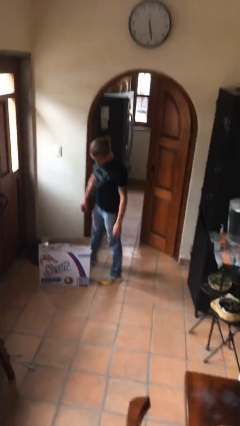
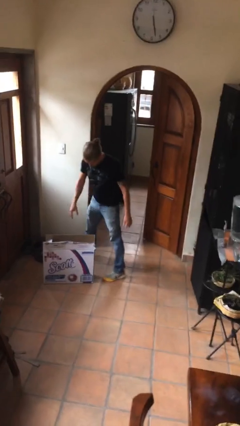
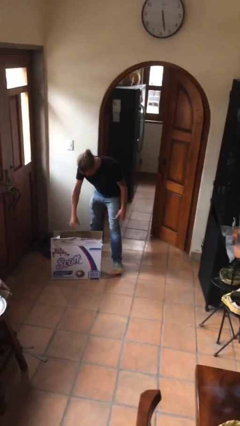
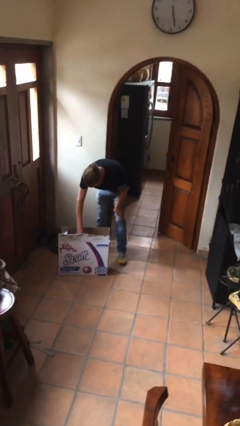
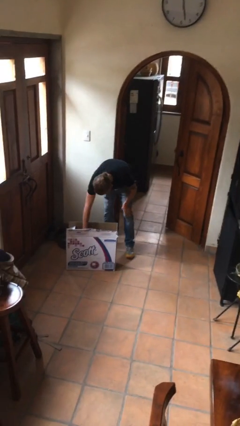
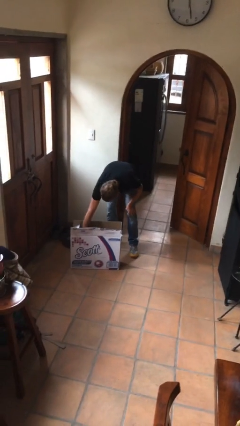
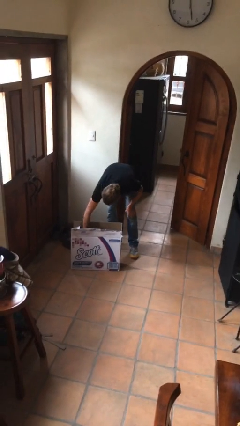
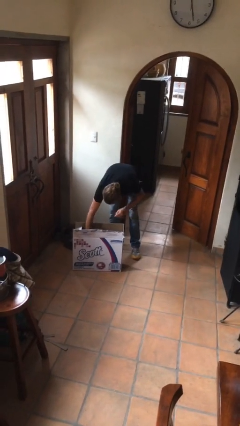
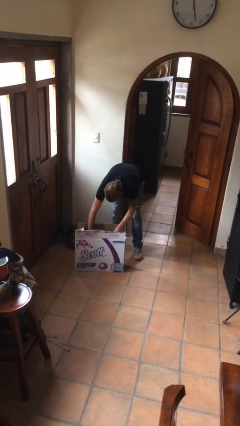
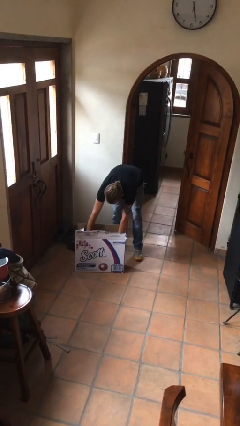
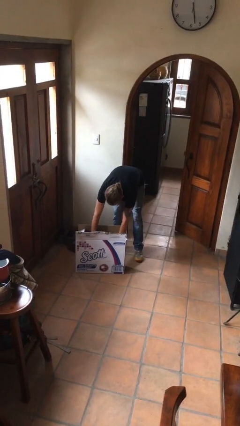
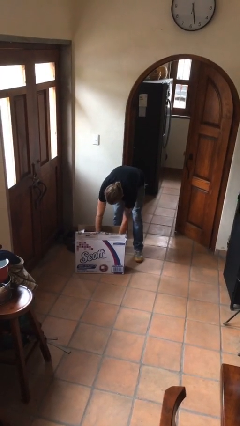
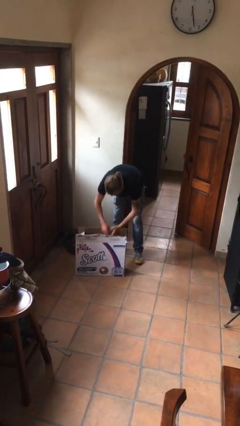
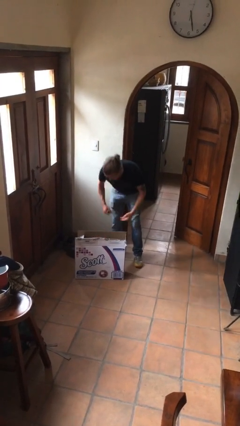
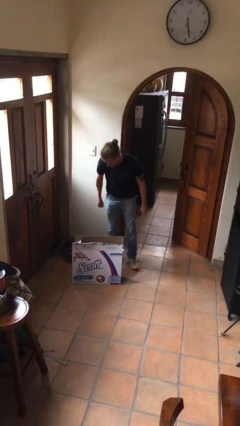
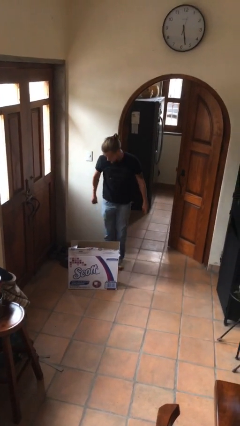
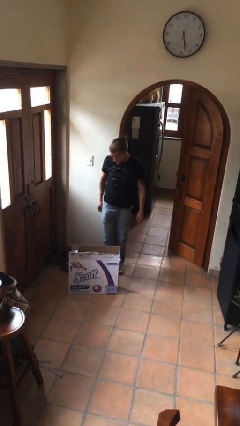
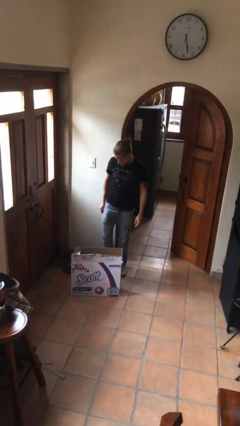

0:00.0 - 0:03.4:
person searches in box

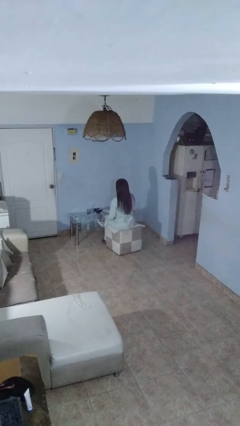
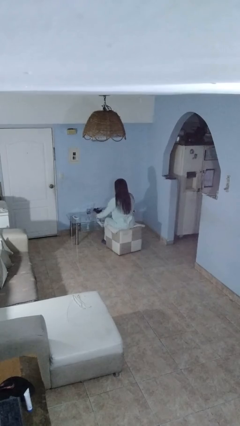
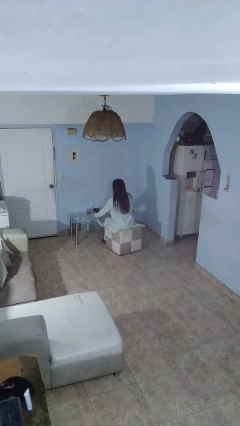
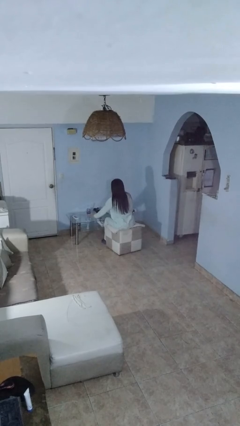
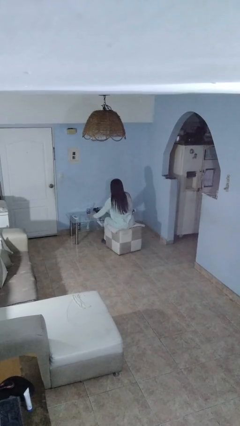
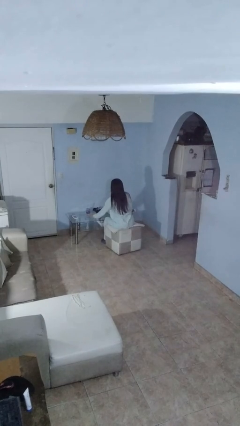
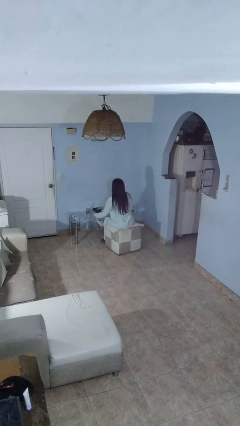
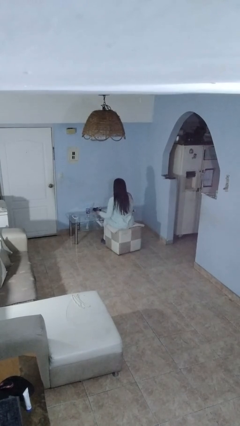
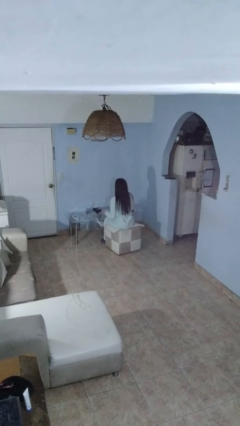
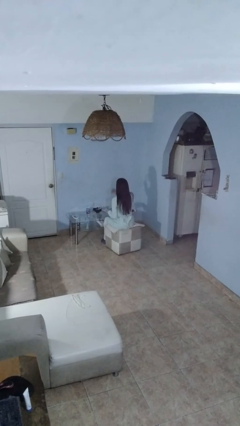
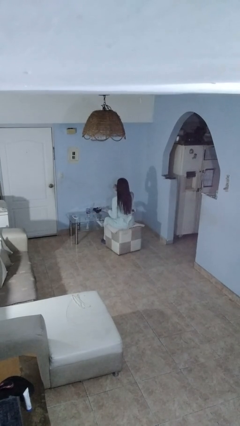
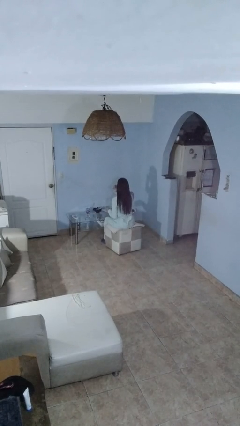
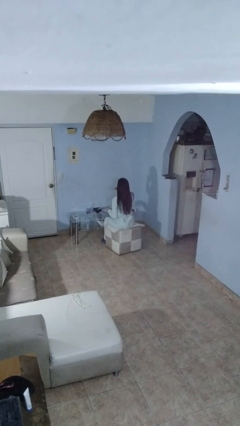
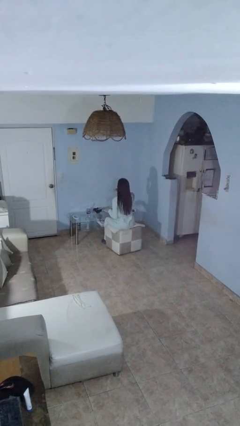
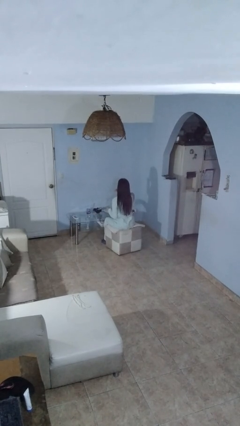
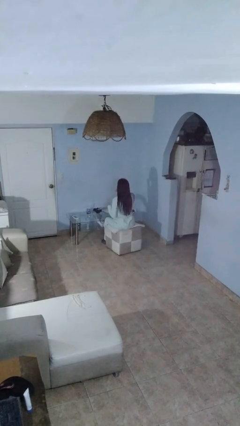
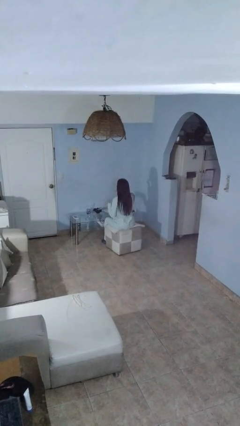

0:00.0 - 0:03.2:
person picks up object from table

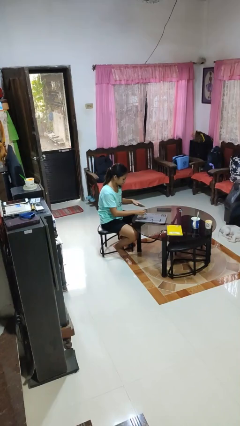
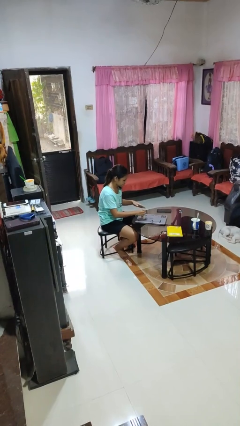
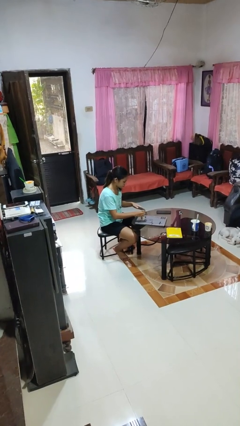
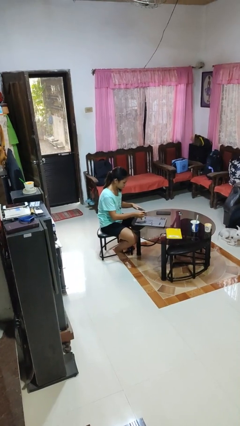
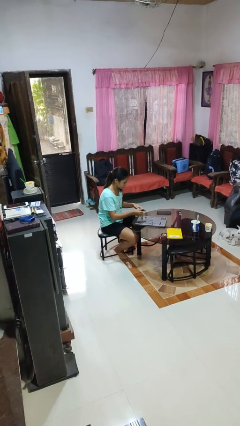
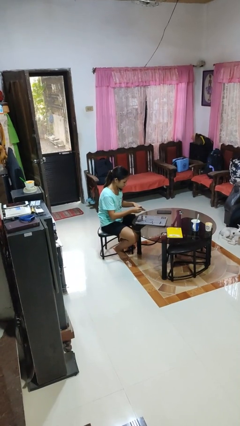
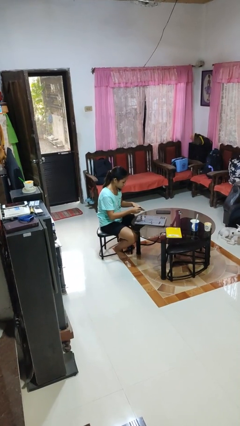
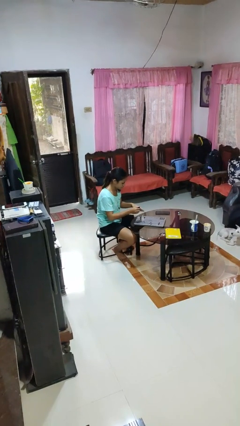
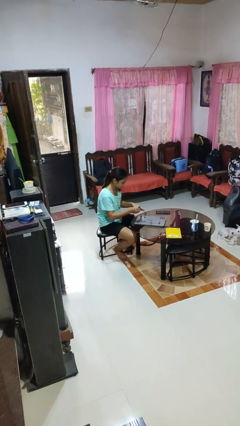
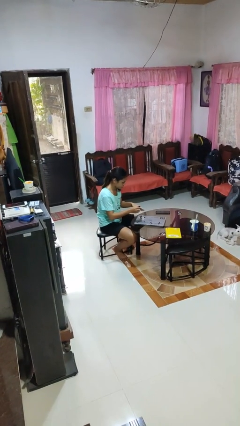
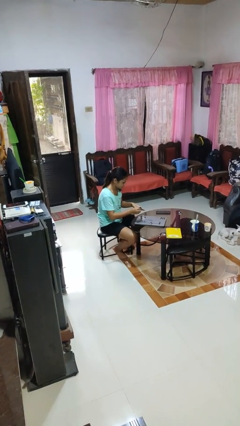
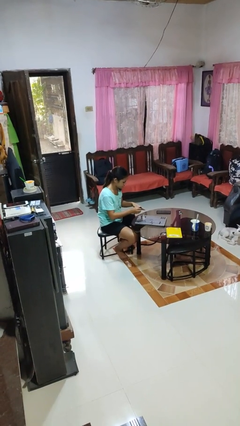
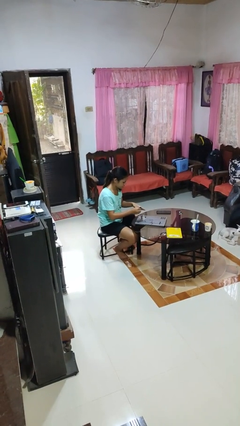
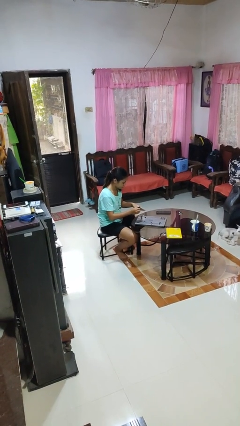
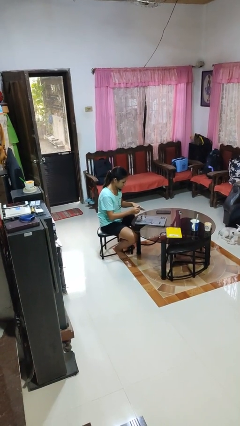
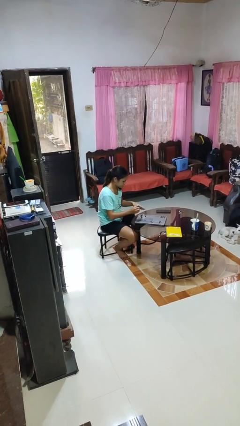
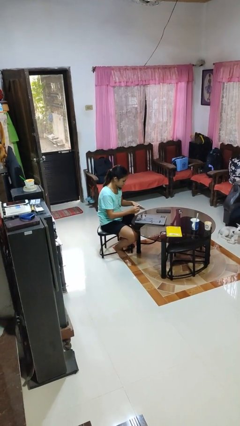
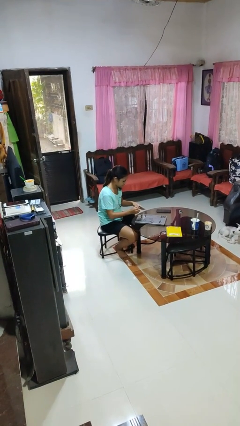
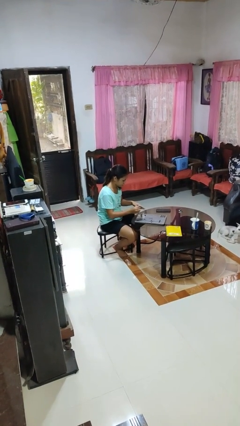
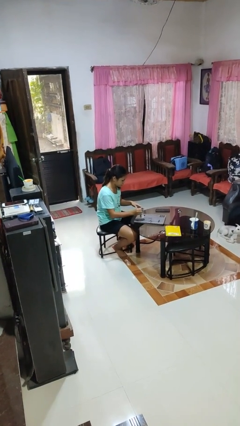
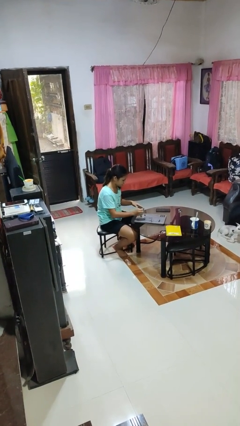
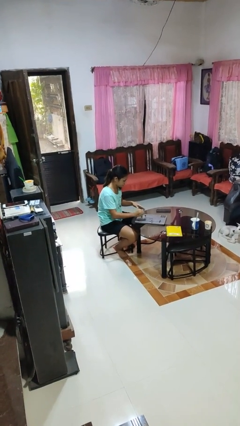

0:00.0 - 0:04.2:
person paints fingernails

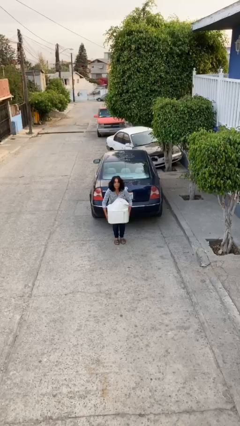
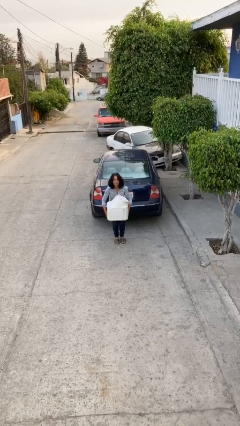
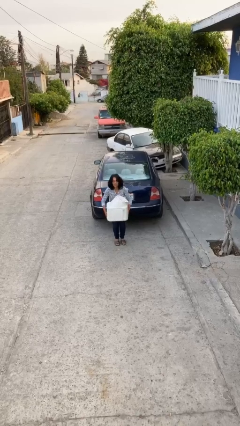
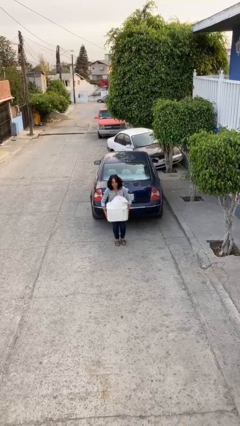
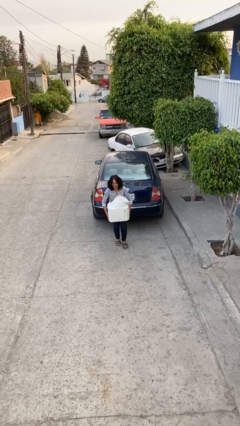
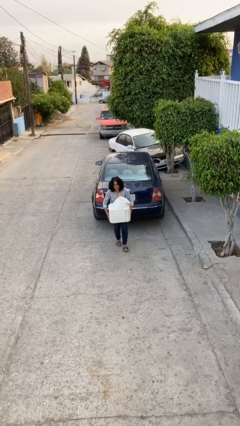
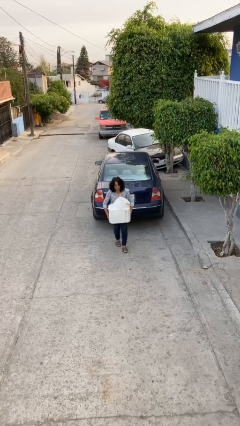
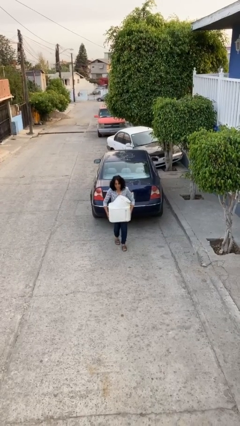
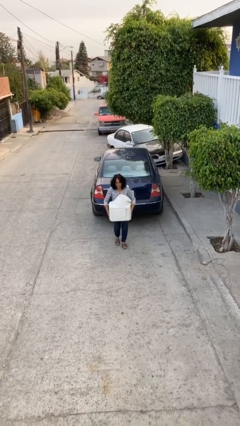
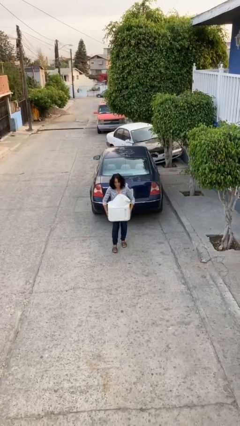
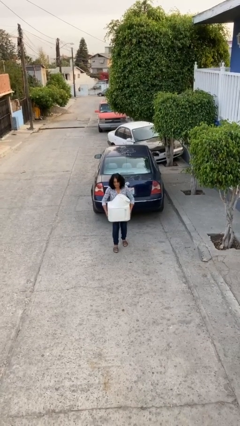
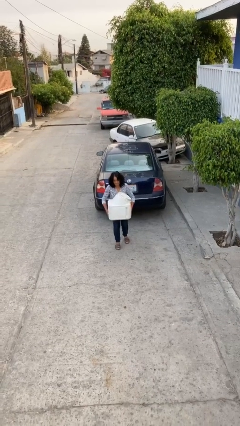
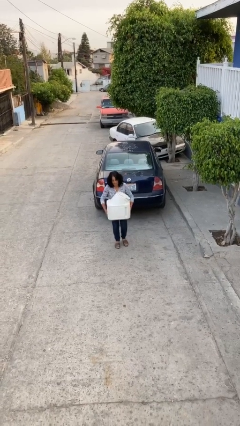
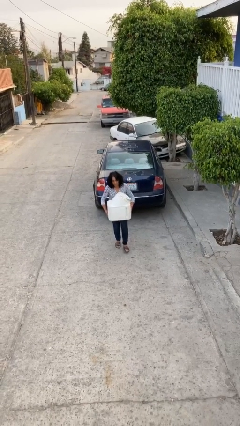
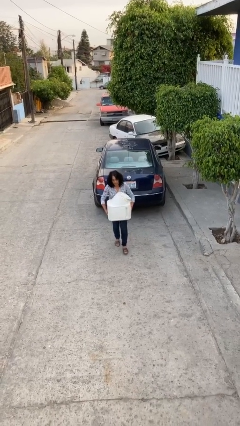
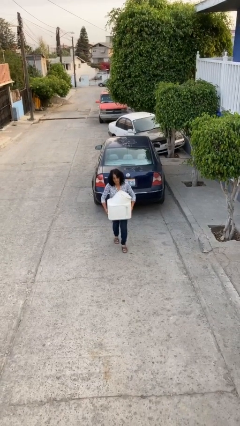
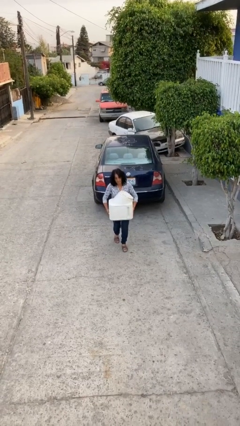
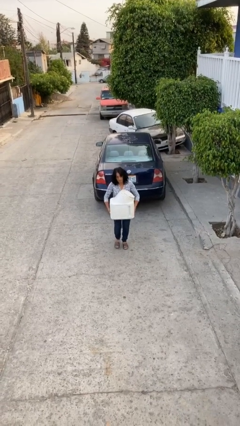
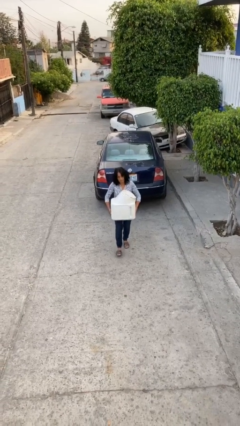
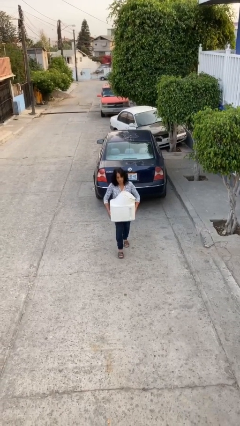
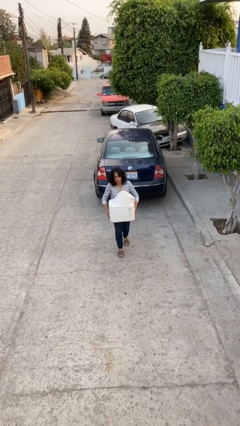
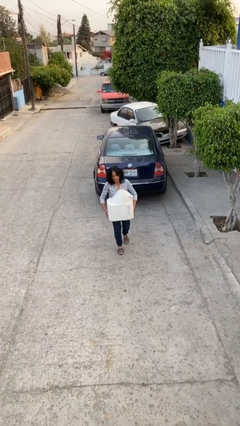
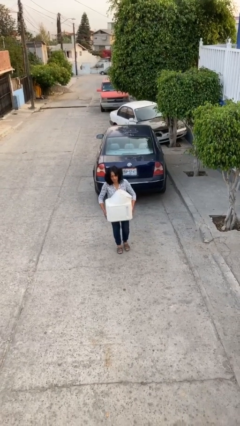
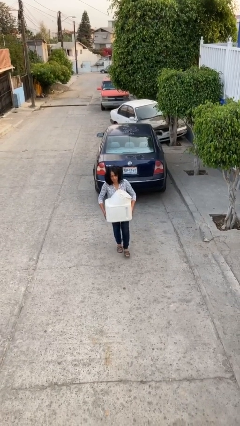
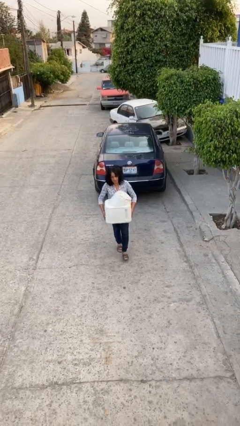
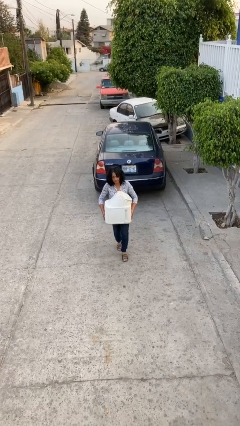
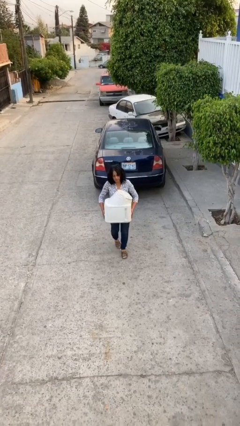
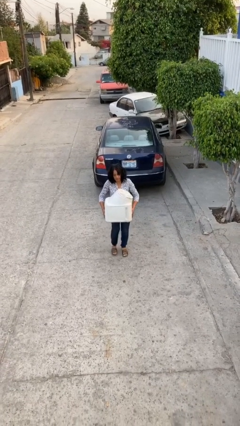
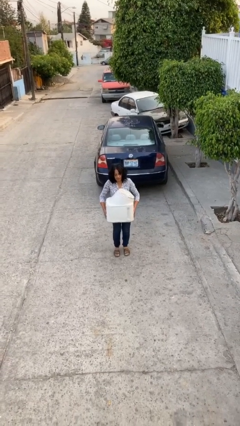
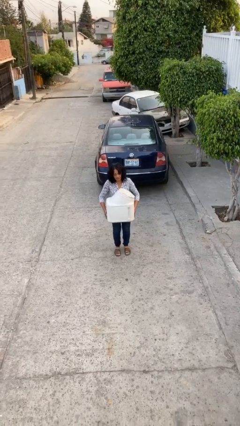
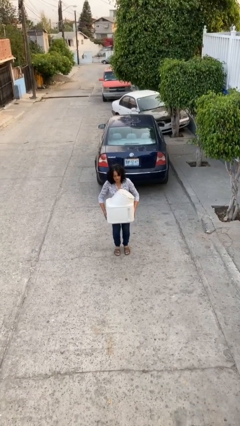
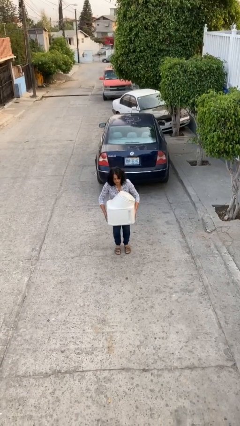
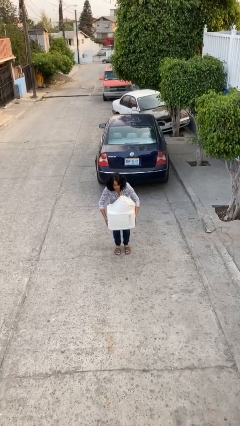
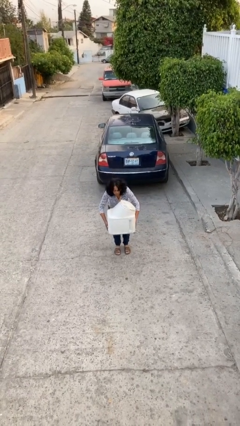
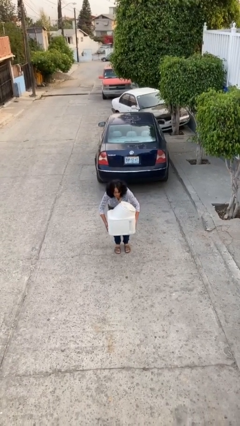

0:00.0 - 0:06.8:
person carries heavy object

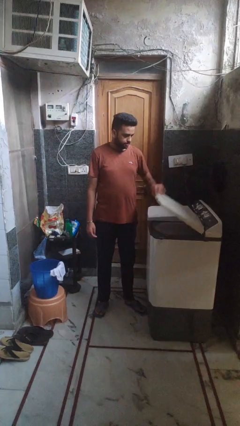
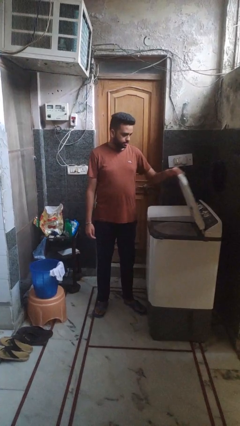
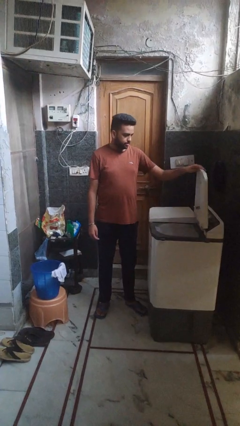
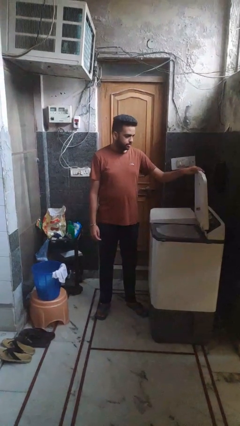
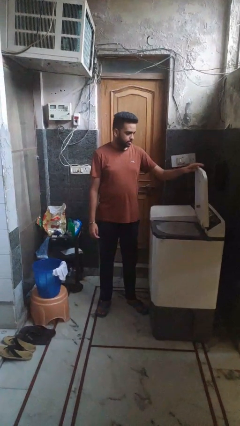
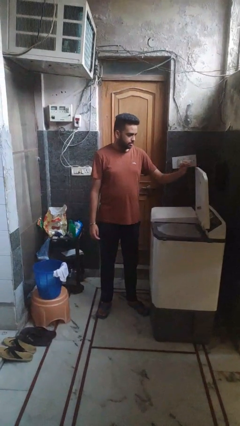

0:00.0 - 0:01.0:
person opens clothes washer
